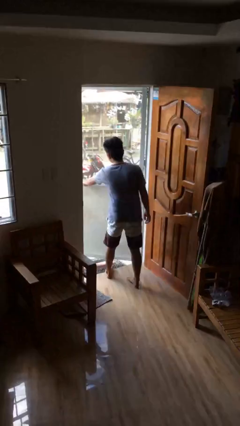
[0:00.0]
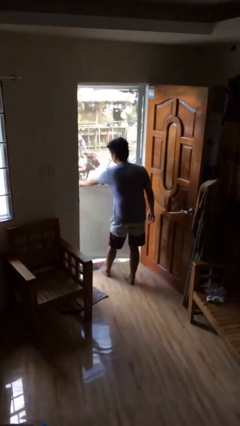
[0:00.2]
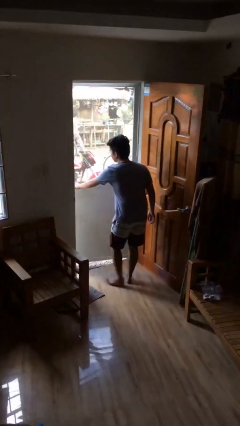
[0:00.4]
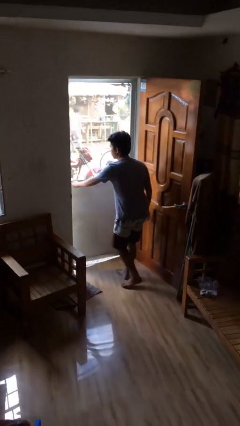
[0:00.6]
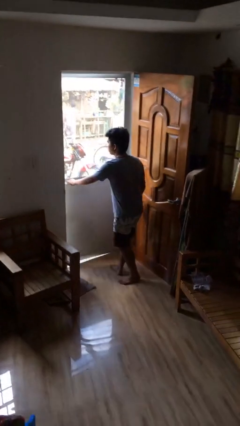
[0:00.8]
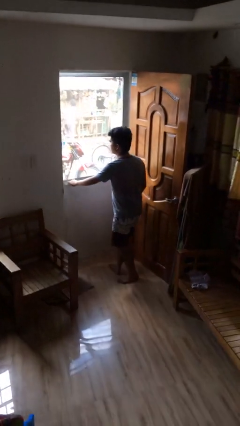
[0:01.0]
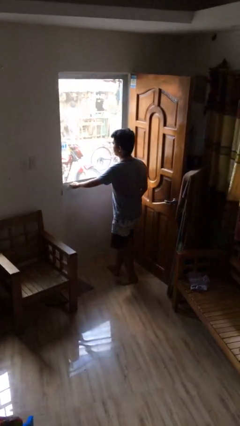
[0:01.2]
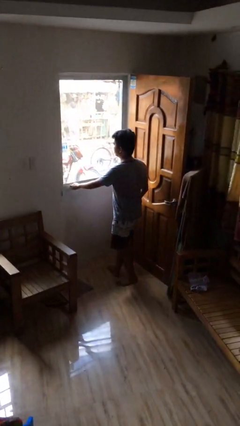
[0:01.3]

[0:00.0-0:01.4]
person closes facility door

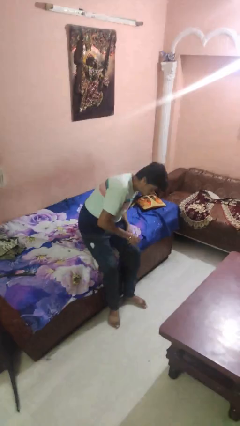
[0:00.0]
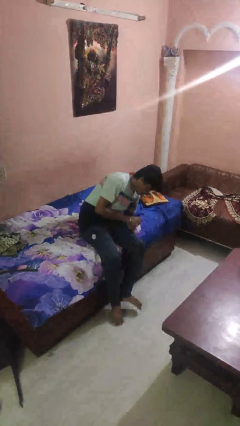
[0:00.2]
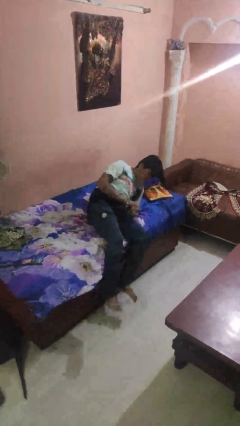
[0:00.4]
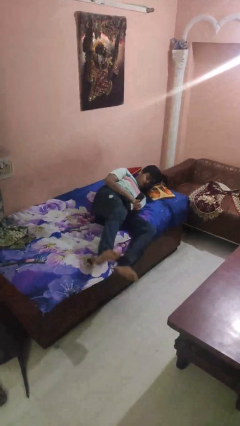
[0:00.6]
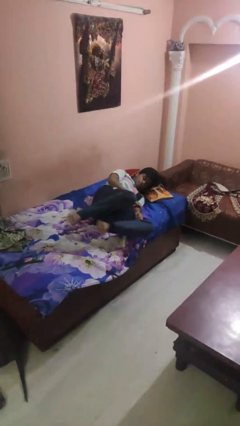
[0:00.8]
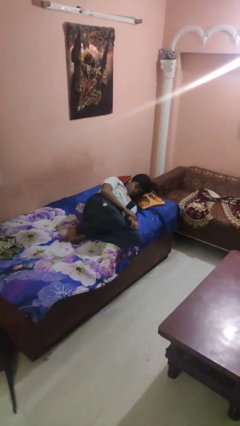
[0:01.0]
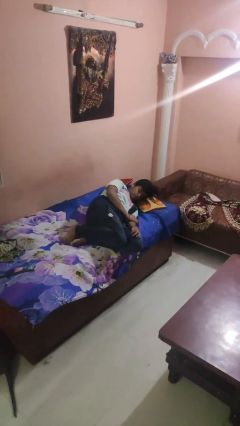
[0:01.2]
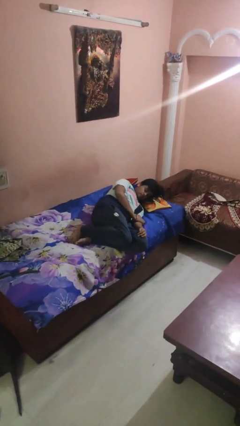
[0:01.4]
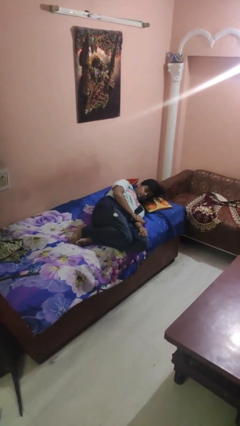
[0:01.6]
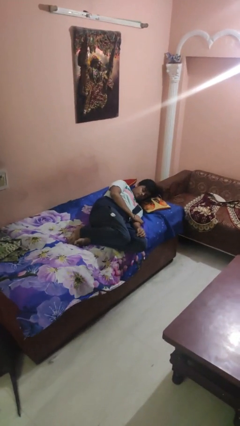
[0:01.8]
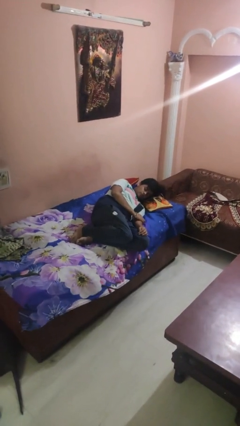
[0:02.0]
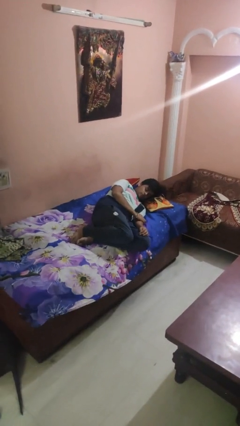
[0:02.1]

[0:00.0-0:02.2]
person lies down on bed

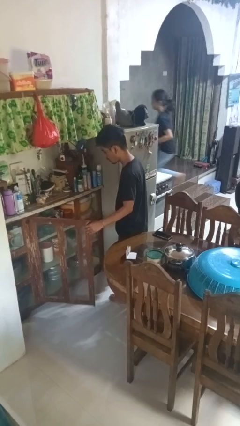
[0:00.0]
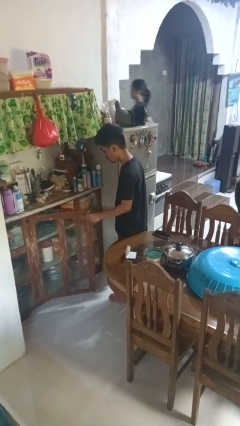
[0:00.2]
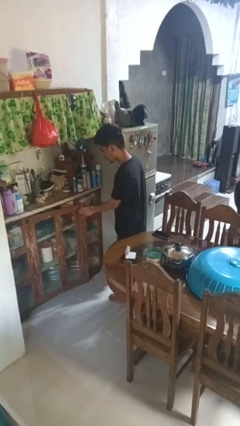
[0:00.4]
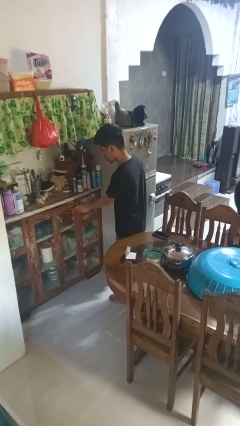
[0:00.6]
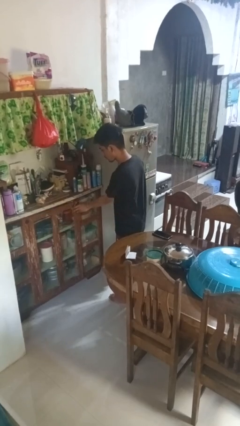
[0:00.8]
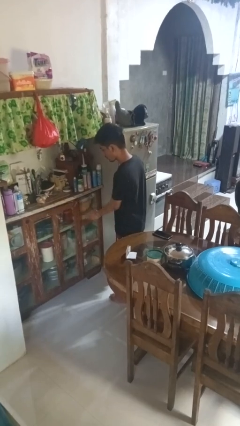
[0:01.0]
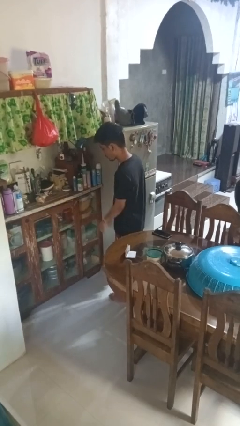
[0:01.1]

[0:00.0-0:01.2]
person closes cabinet

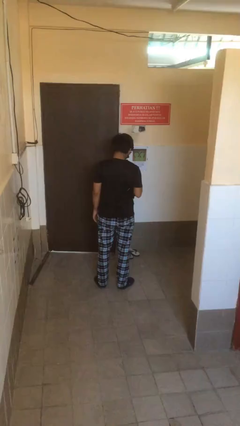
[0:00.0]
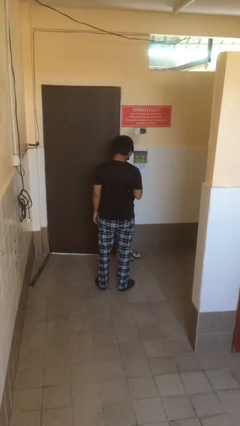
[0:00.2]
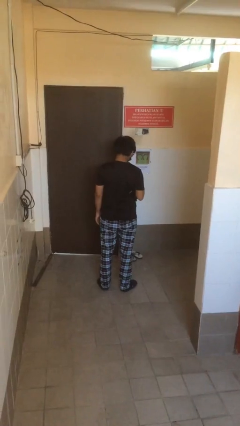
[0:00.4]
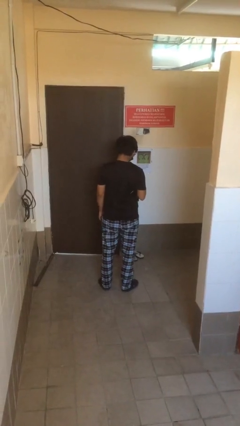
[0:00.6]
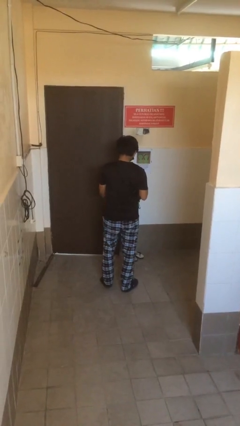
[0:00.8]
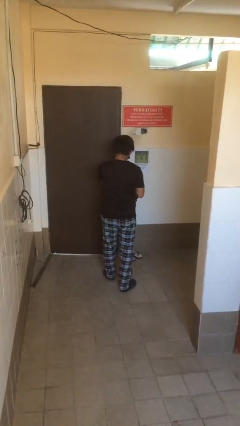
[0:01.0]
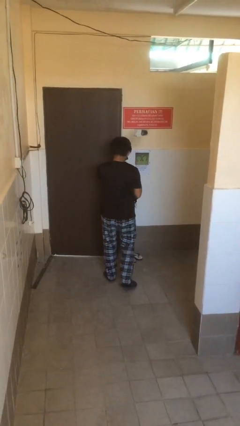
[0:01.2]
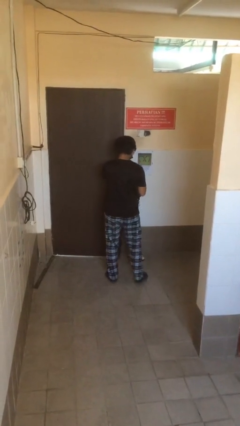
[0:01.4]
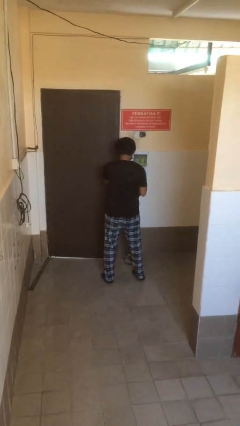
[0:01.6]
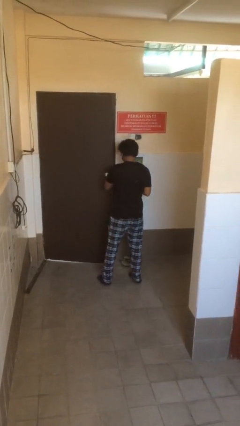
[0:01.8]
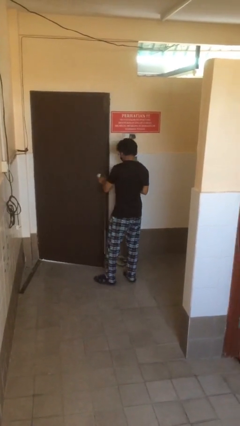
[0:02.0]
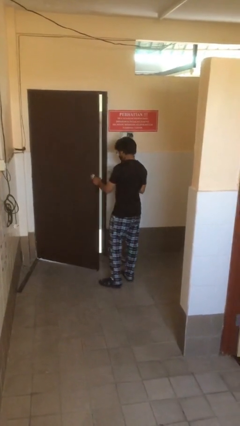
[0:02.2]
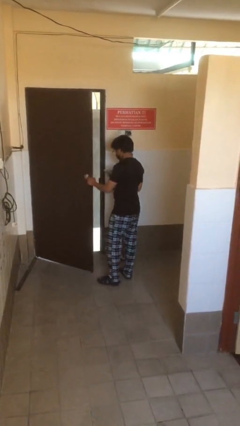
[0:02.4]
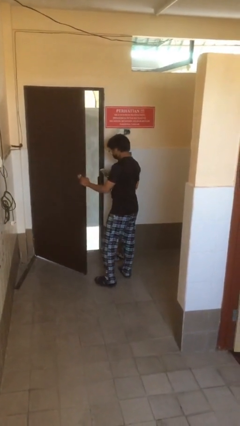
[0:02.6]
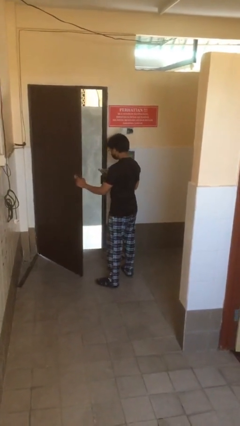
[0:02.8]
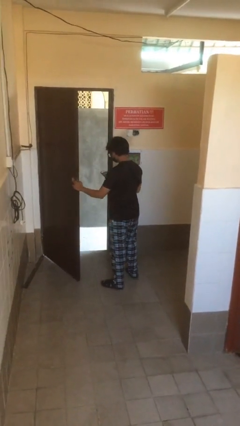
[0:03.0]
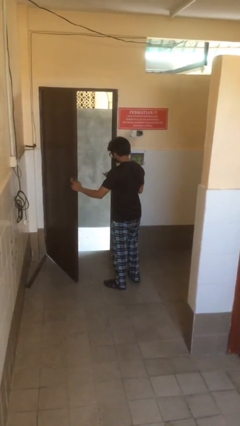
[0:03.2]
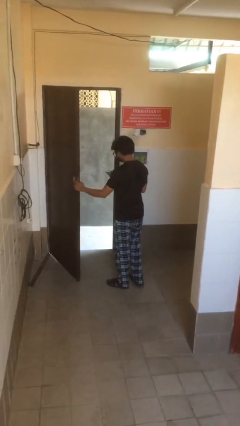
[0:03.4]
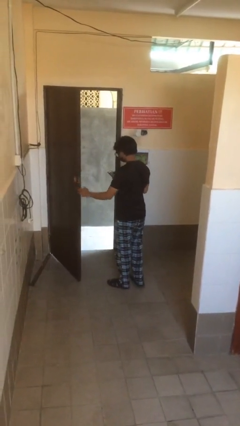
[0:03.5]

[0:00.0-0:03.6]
person opens facility door

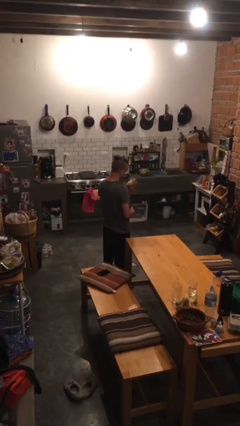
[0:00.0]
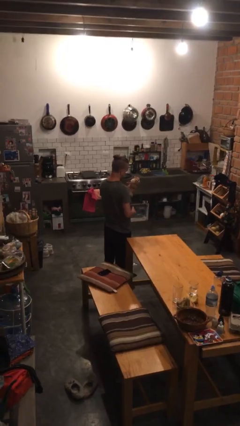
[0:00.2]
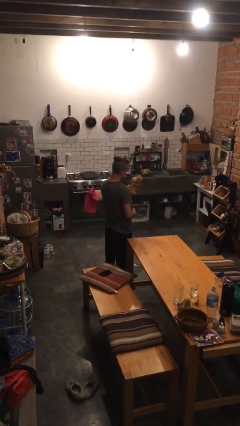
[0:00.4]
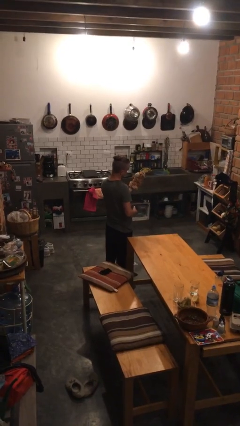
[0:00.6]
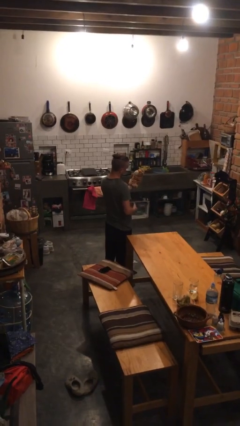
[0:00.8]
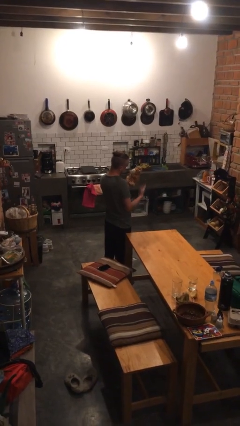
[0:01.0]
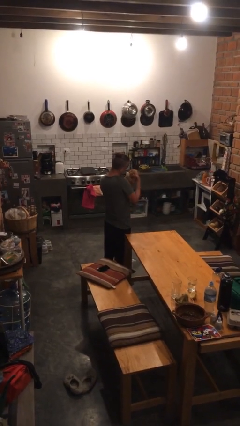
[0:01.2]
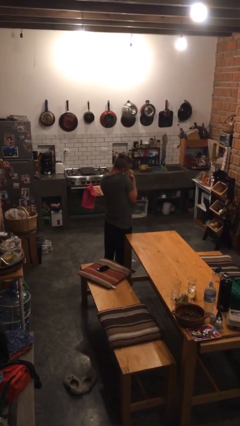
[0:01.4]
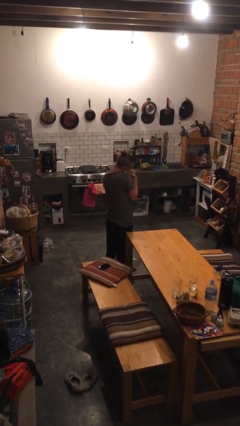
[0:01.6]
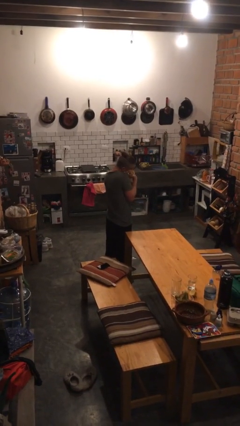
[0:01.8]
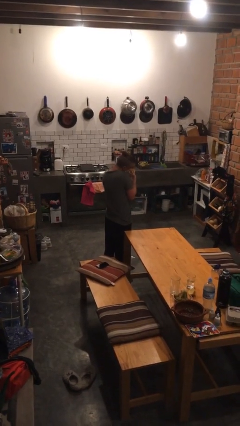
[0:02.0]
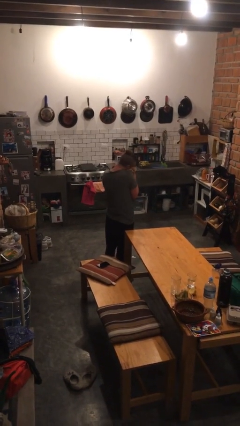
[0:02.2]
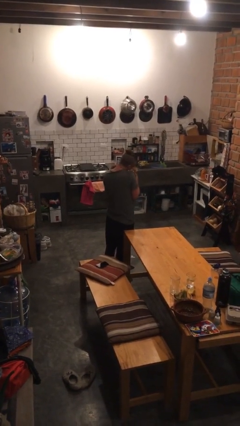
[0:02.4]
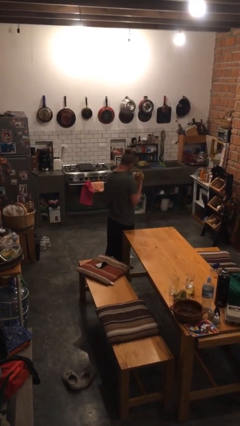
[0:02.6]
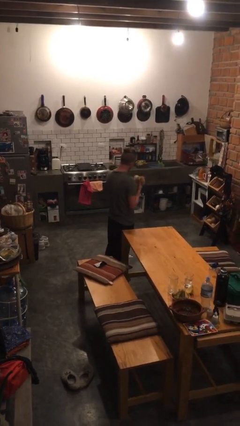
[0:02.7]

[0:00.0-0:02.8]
person hugs stuffed animal

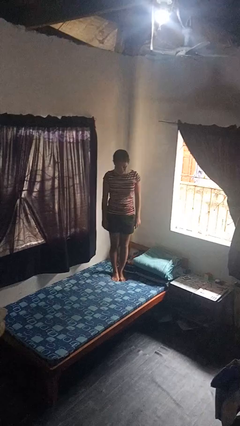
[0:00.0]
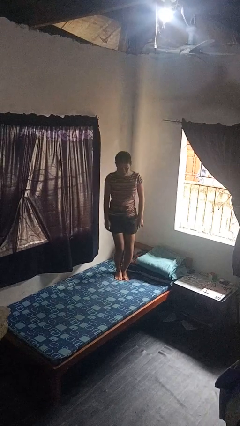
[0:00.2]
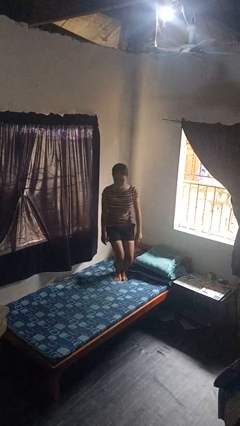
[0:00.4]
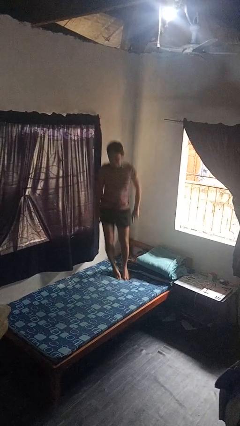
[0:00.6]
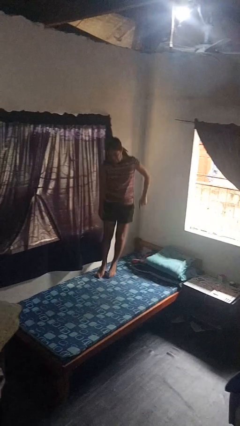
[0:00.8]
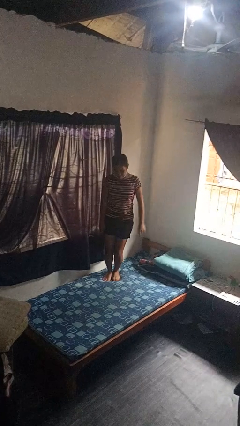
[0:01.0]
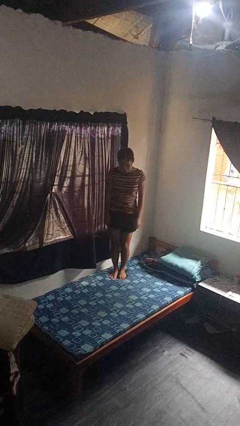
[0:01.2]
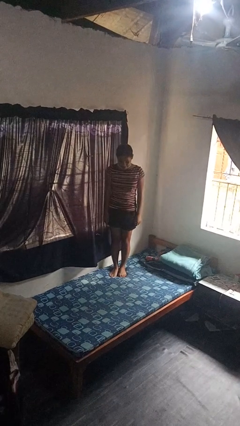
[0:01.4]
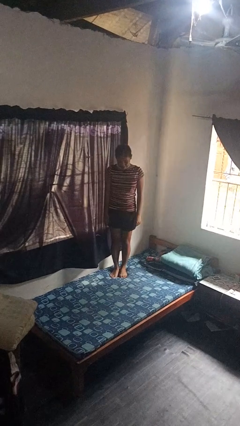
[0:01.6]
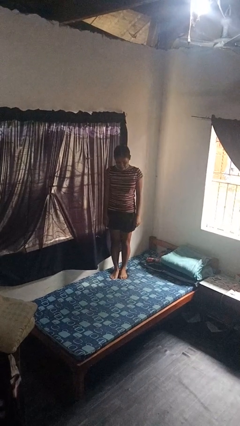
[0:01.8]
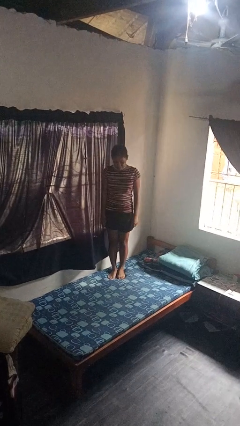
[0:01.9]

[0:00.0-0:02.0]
person jumps on bed

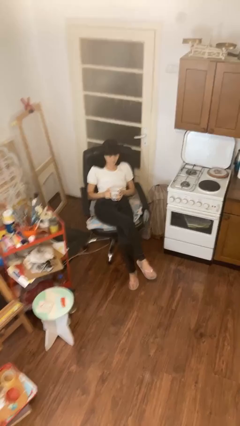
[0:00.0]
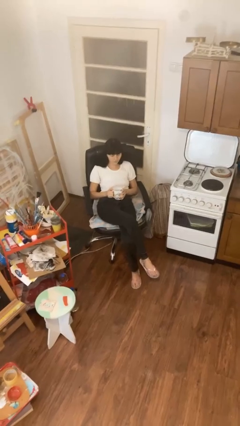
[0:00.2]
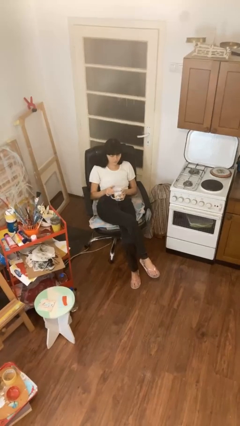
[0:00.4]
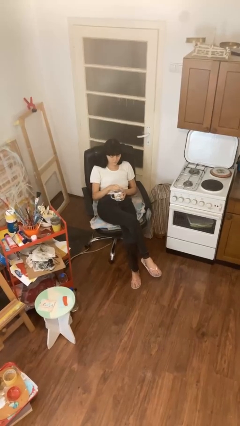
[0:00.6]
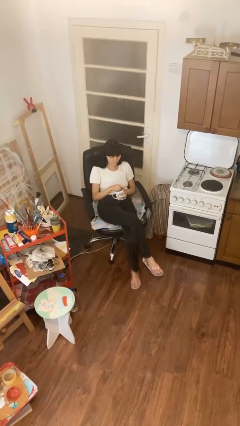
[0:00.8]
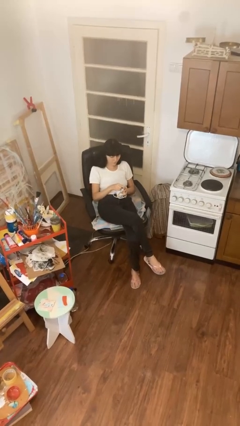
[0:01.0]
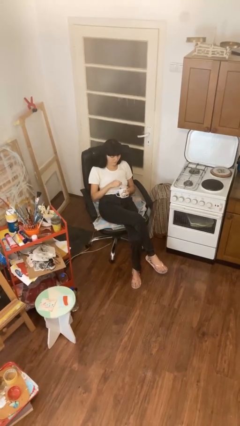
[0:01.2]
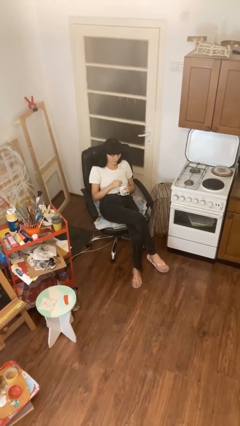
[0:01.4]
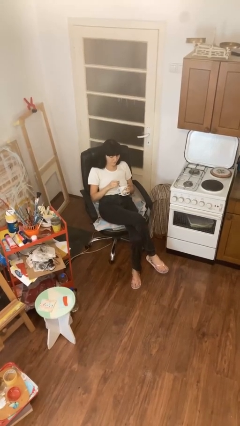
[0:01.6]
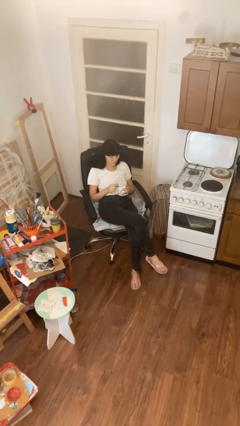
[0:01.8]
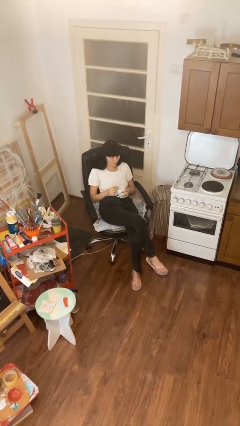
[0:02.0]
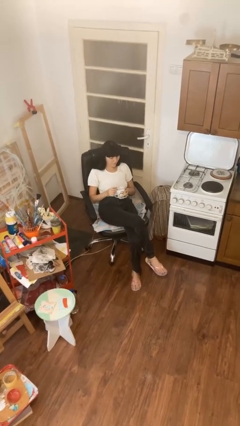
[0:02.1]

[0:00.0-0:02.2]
person stirs mug

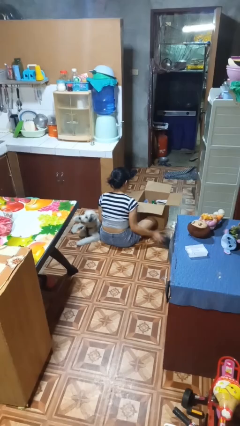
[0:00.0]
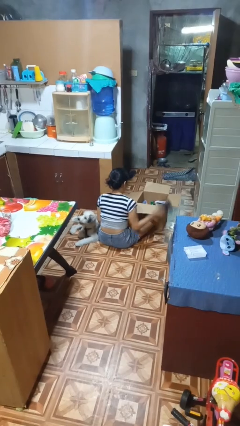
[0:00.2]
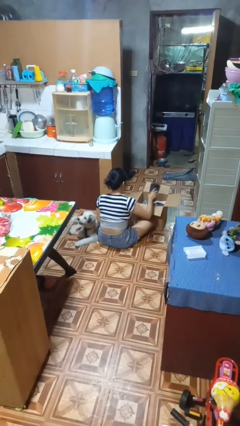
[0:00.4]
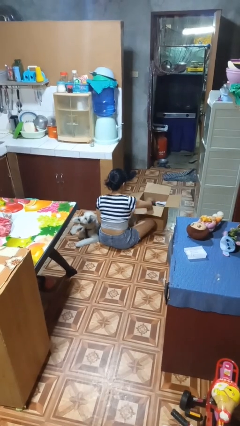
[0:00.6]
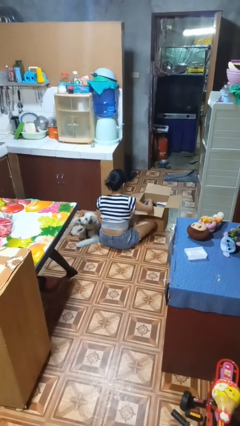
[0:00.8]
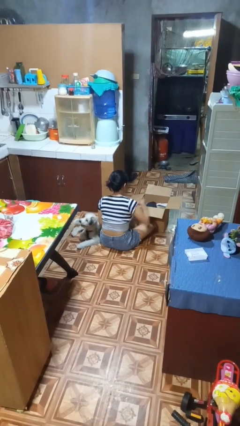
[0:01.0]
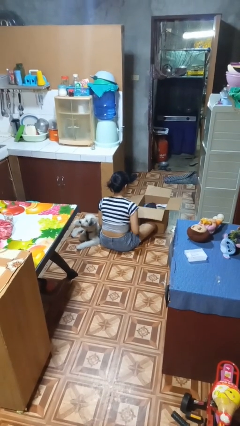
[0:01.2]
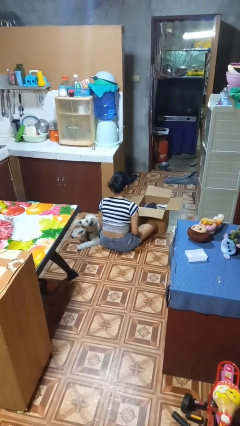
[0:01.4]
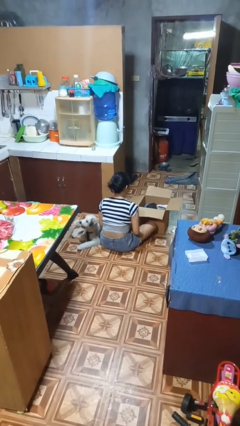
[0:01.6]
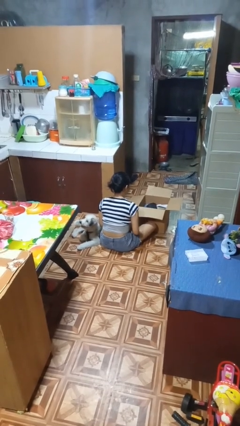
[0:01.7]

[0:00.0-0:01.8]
person puts object into box
